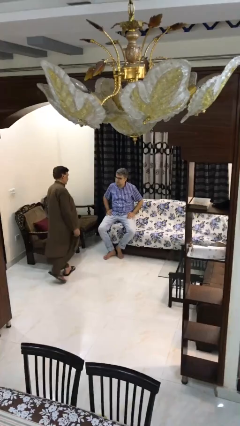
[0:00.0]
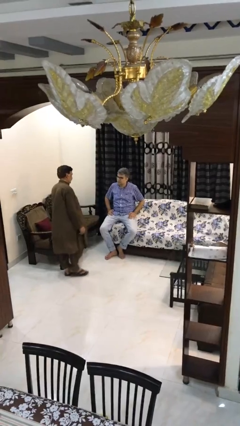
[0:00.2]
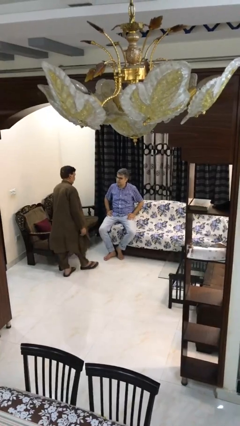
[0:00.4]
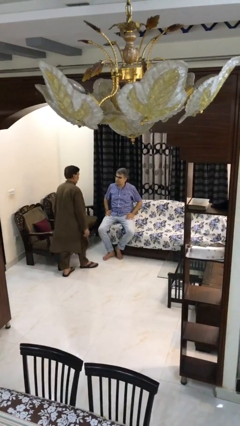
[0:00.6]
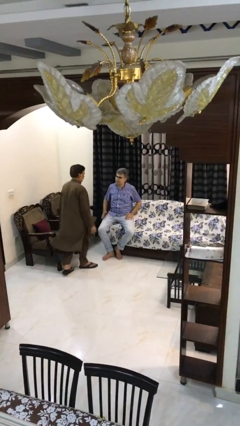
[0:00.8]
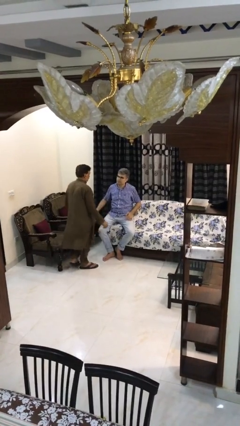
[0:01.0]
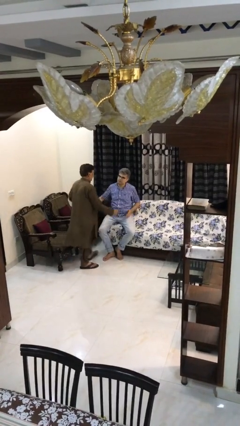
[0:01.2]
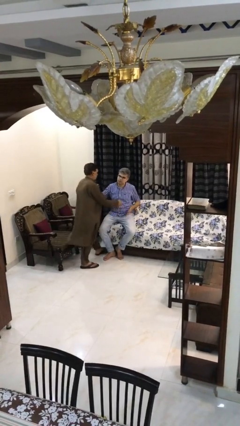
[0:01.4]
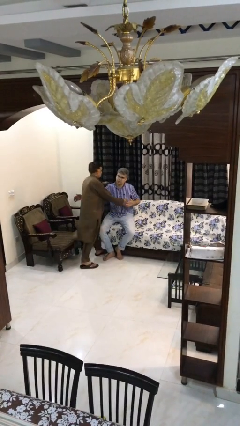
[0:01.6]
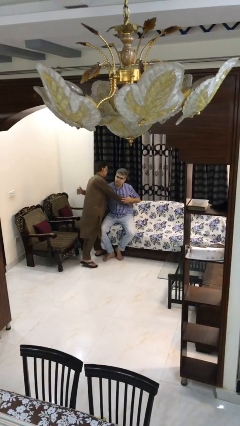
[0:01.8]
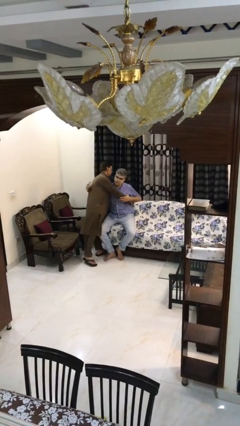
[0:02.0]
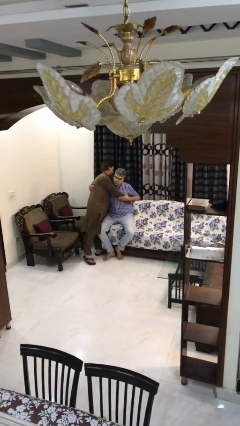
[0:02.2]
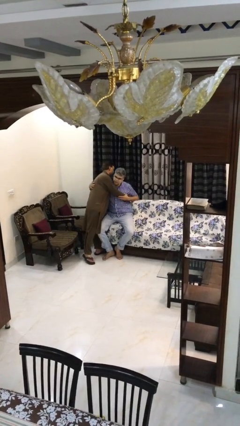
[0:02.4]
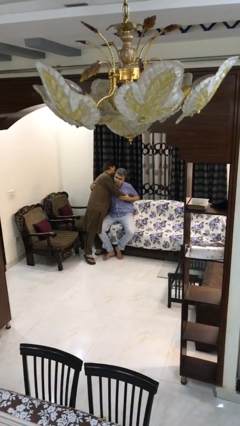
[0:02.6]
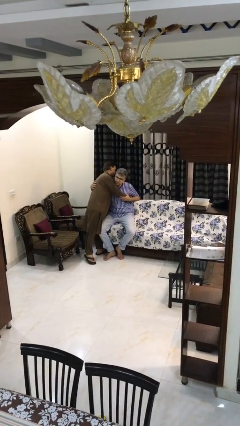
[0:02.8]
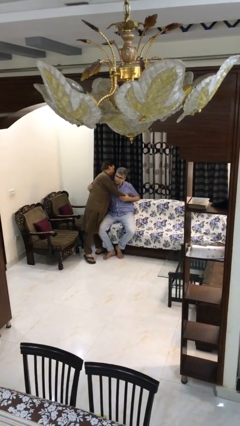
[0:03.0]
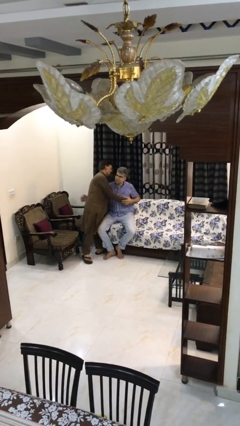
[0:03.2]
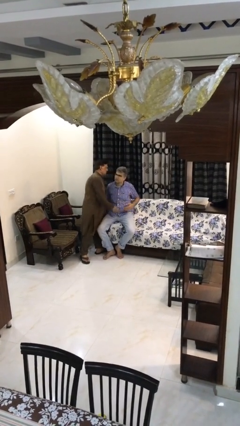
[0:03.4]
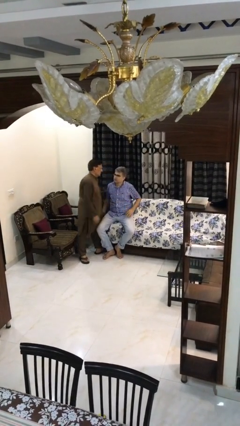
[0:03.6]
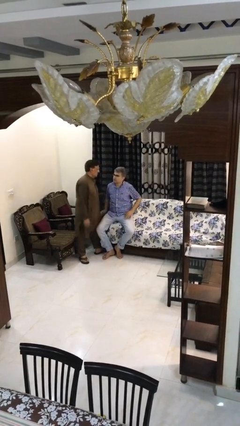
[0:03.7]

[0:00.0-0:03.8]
person embraces person

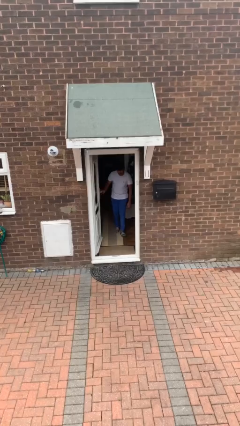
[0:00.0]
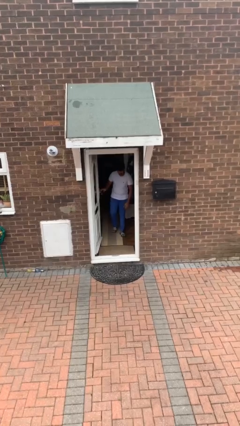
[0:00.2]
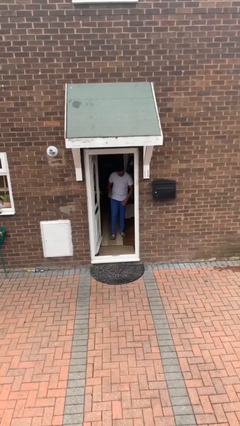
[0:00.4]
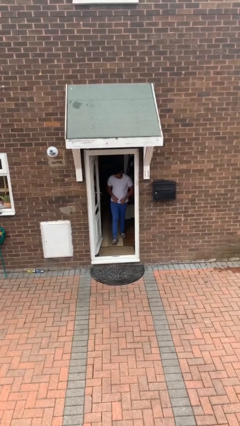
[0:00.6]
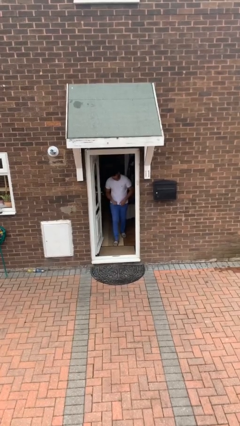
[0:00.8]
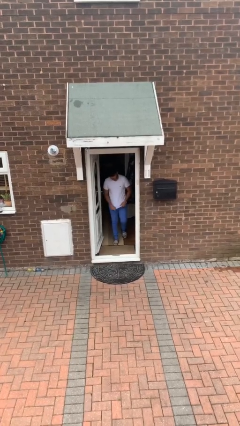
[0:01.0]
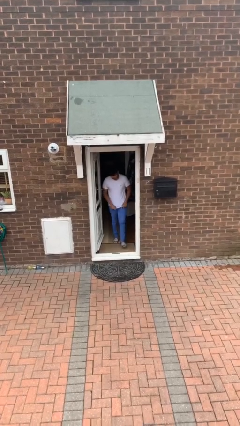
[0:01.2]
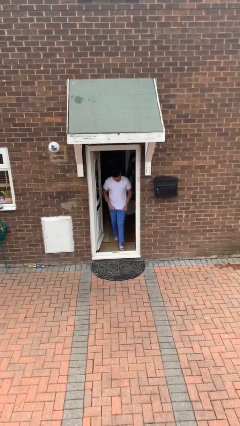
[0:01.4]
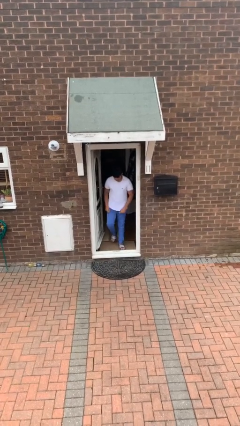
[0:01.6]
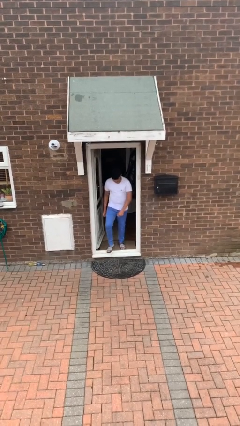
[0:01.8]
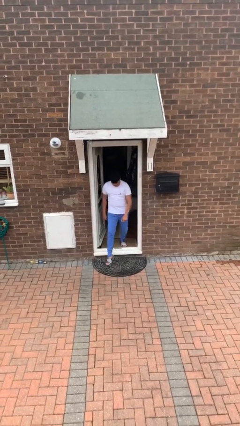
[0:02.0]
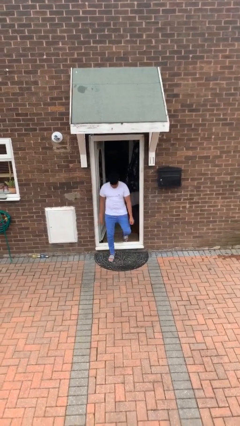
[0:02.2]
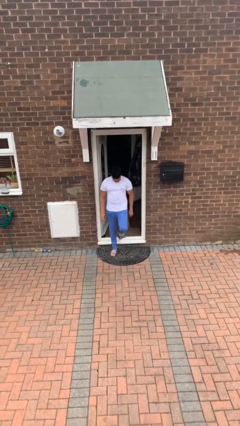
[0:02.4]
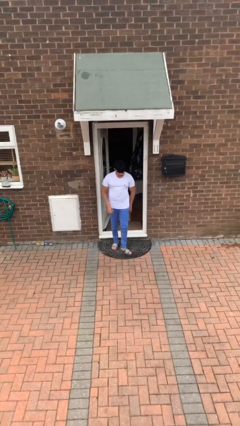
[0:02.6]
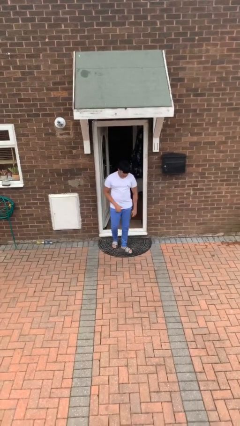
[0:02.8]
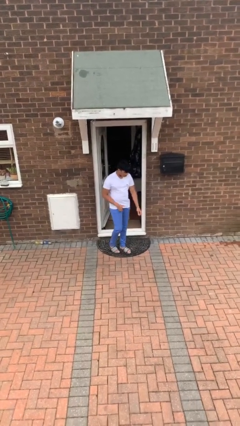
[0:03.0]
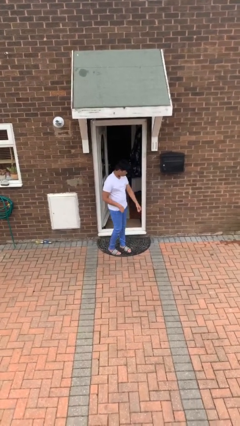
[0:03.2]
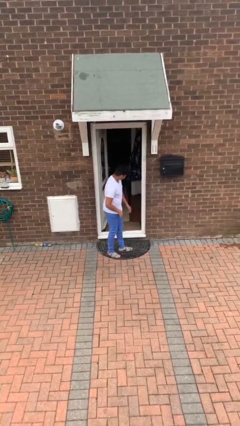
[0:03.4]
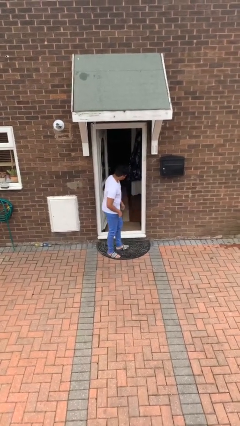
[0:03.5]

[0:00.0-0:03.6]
person enters scene through structure

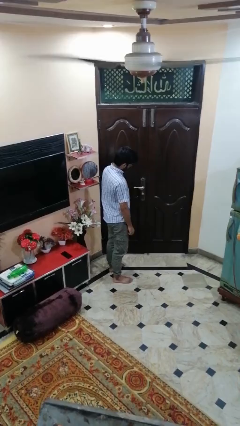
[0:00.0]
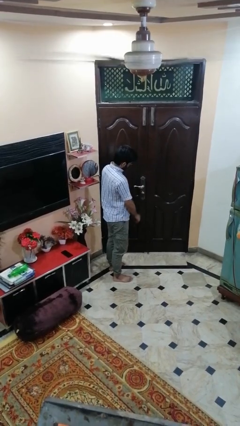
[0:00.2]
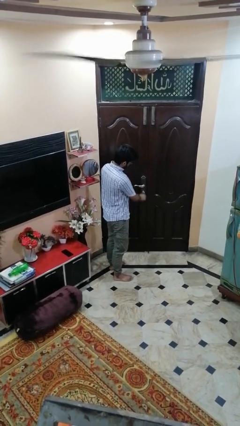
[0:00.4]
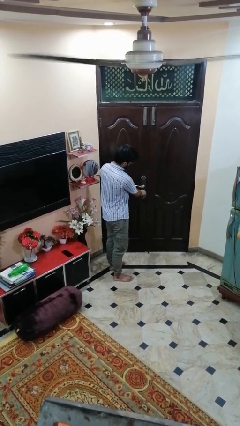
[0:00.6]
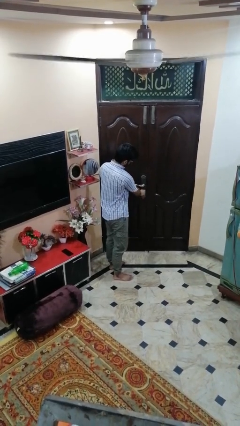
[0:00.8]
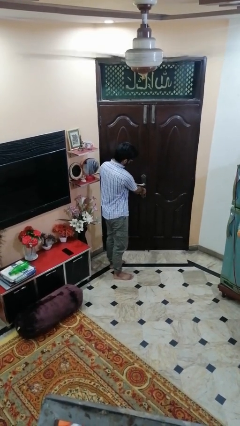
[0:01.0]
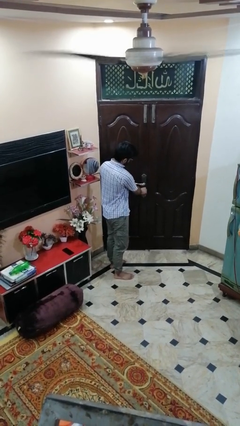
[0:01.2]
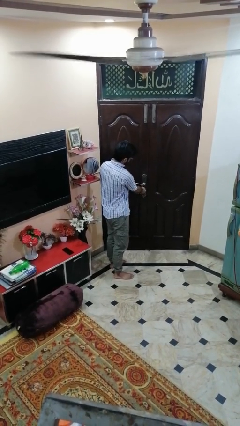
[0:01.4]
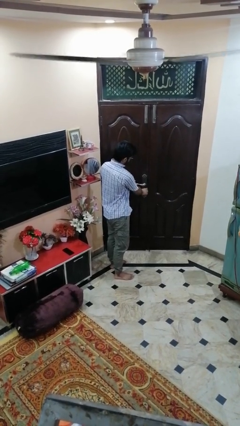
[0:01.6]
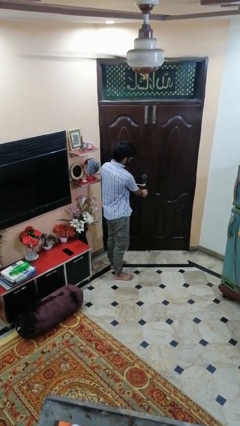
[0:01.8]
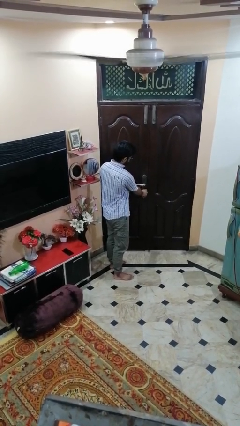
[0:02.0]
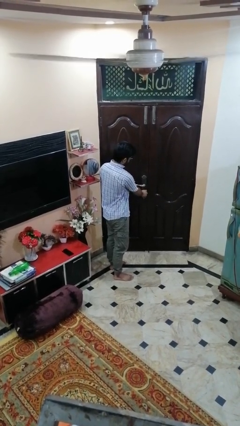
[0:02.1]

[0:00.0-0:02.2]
person locks door with keys

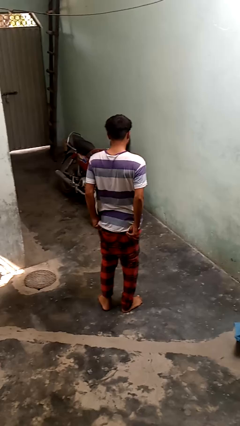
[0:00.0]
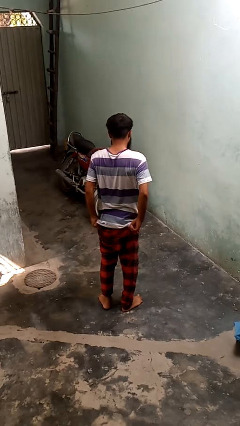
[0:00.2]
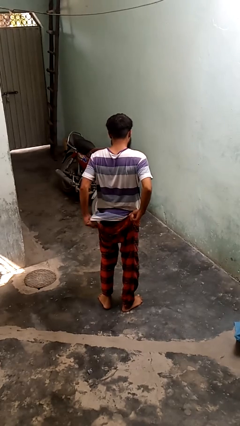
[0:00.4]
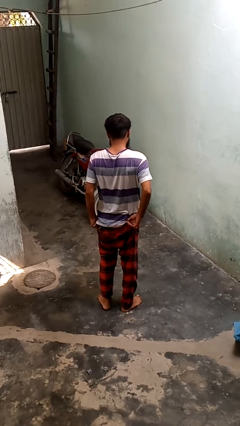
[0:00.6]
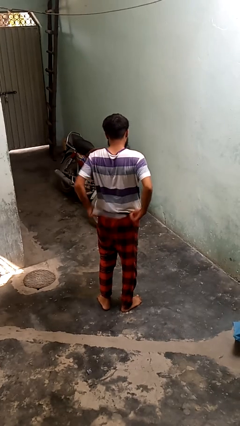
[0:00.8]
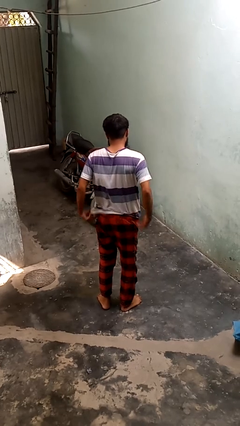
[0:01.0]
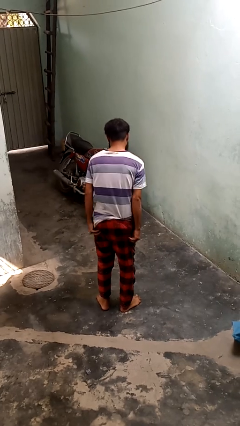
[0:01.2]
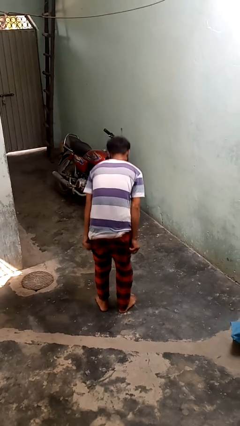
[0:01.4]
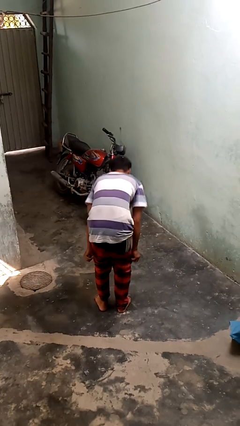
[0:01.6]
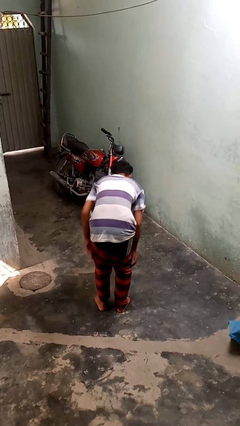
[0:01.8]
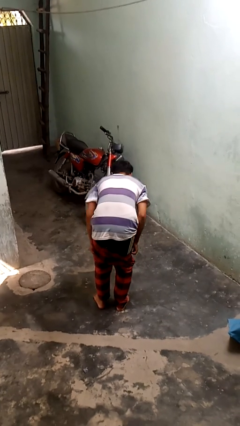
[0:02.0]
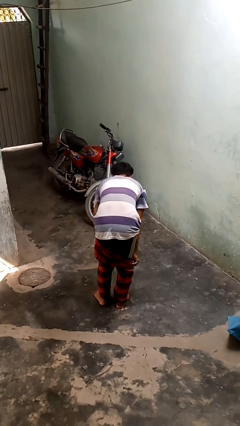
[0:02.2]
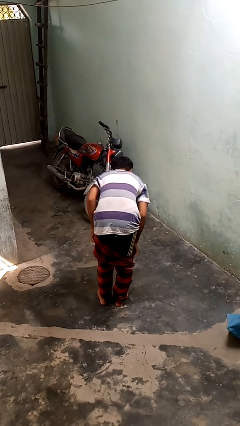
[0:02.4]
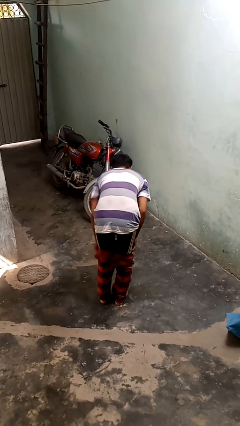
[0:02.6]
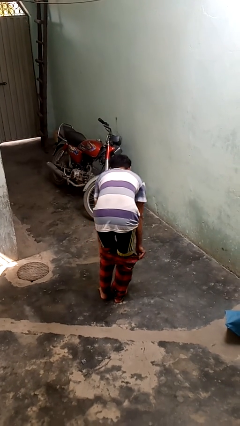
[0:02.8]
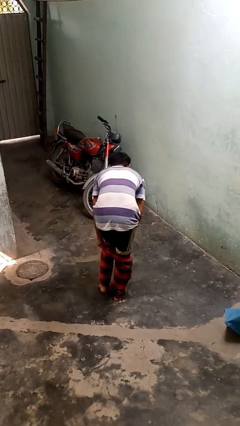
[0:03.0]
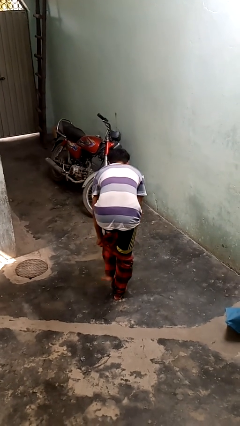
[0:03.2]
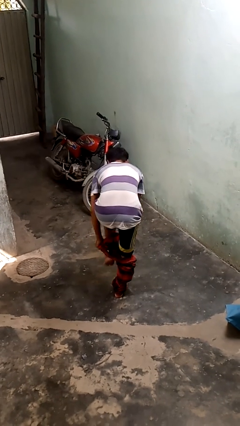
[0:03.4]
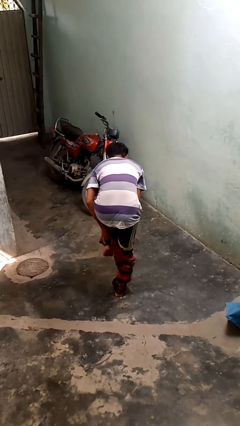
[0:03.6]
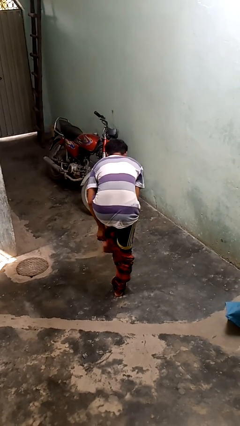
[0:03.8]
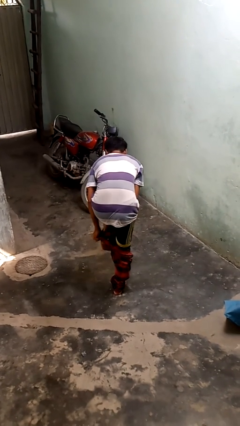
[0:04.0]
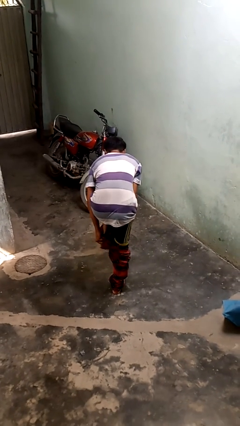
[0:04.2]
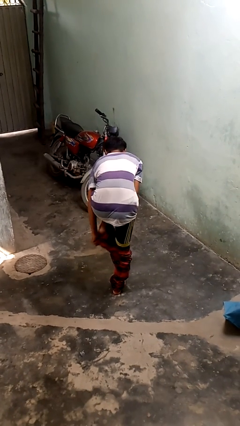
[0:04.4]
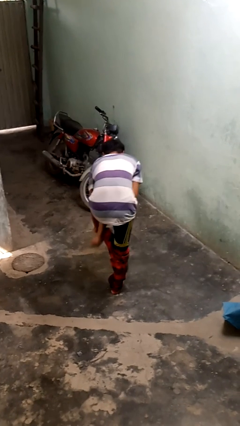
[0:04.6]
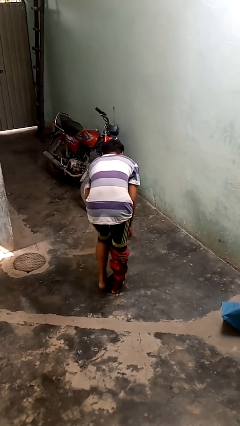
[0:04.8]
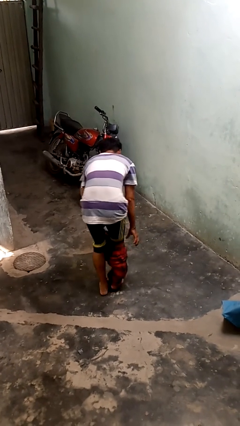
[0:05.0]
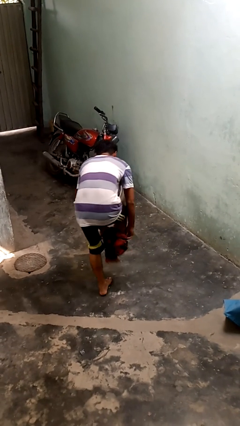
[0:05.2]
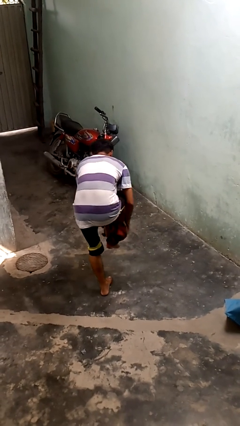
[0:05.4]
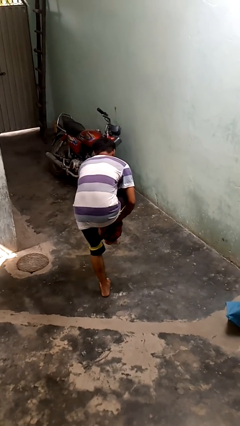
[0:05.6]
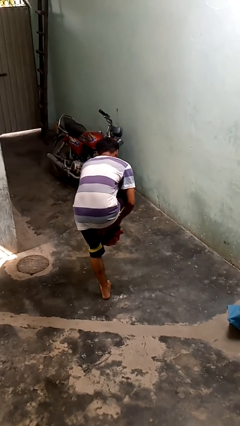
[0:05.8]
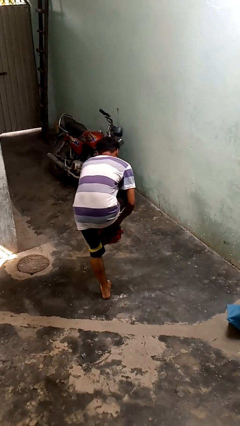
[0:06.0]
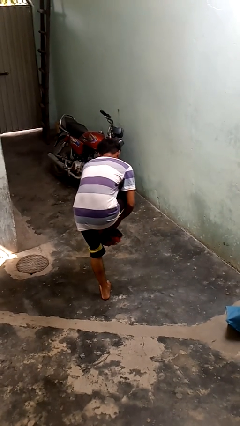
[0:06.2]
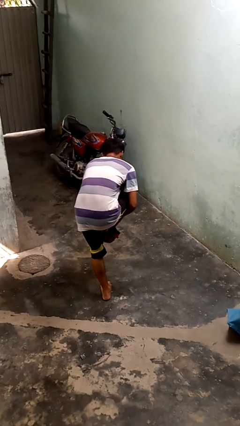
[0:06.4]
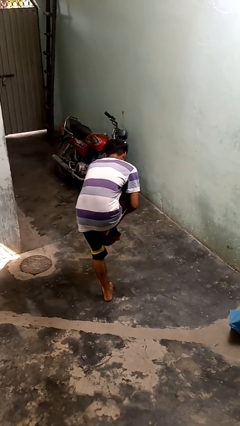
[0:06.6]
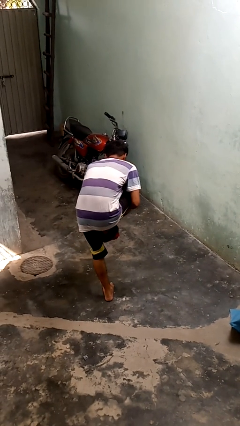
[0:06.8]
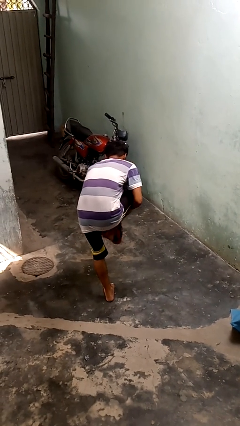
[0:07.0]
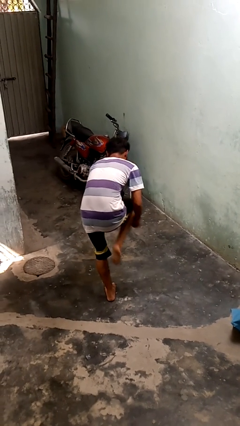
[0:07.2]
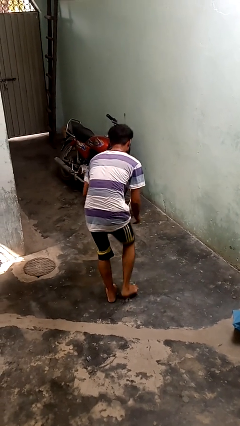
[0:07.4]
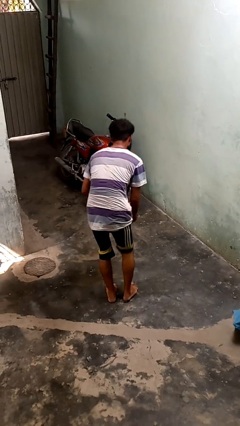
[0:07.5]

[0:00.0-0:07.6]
person takes off pants
